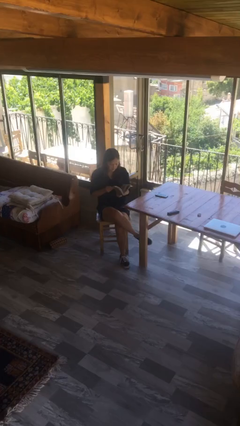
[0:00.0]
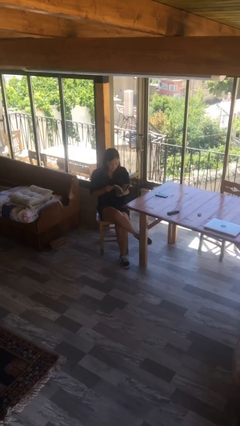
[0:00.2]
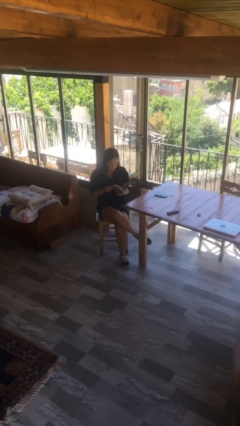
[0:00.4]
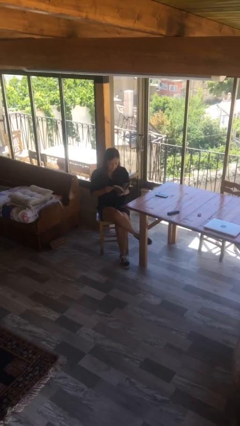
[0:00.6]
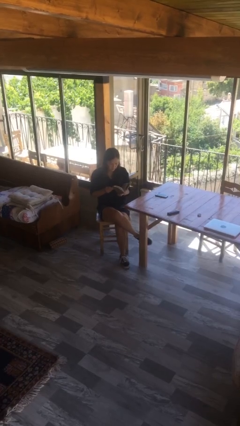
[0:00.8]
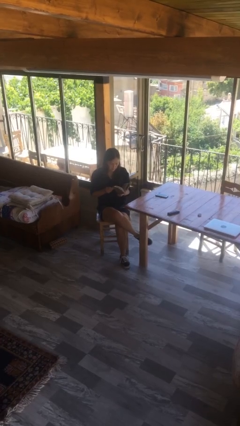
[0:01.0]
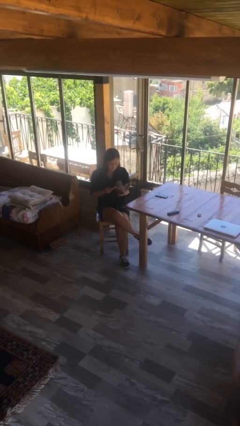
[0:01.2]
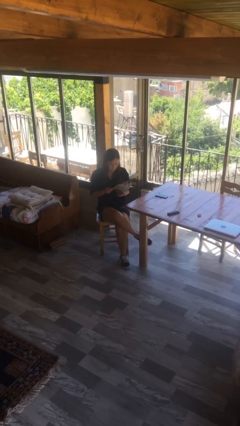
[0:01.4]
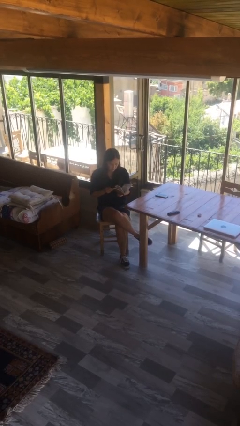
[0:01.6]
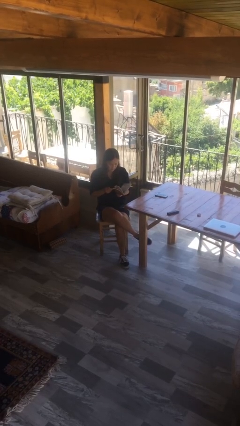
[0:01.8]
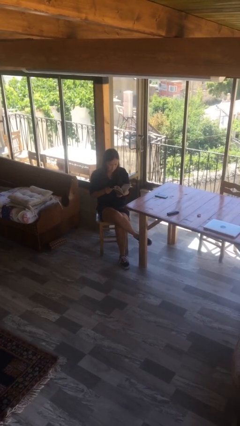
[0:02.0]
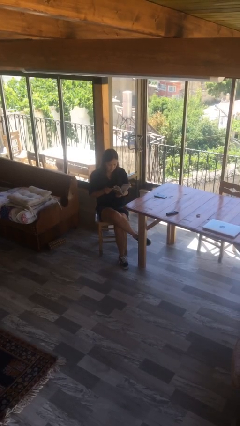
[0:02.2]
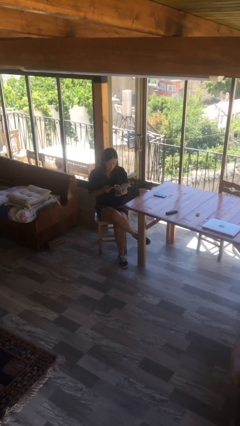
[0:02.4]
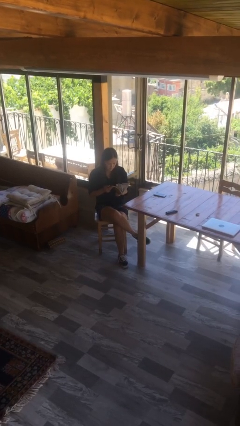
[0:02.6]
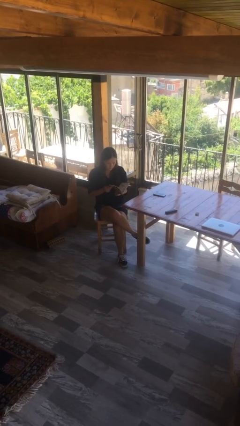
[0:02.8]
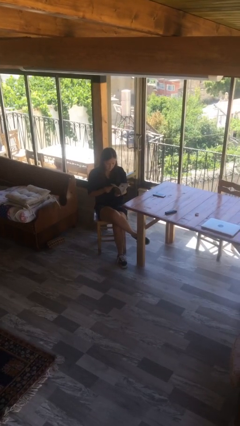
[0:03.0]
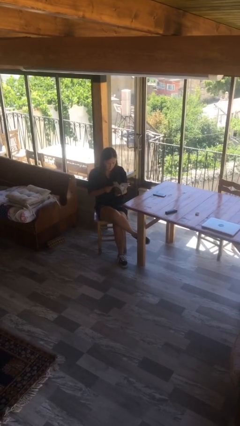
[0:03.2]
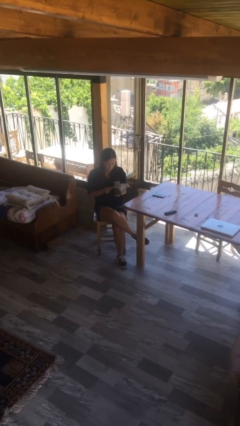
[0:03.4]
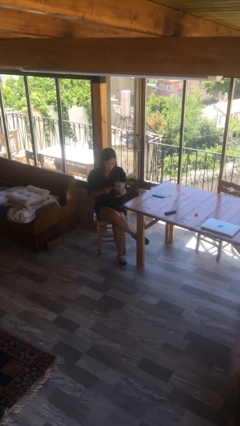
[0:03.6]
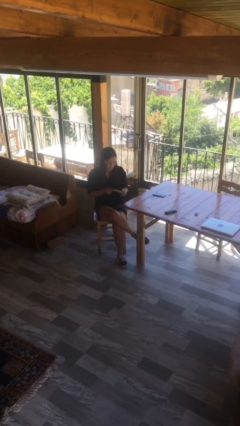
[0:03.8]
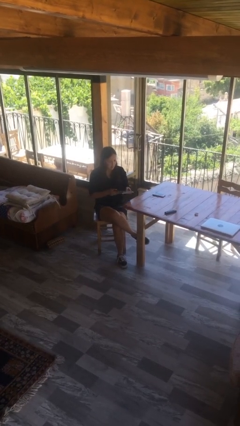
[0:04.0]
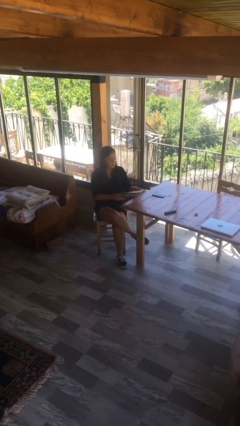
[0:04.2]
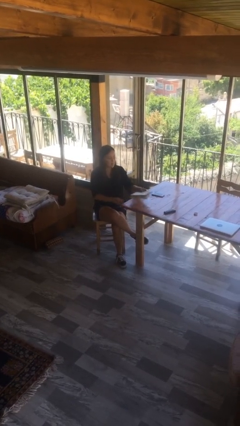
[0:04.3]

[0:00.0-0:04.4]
person reads document

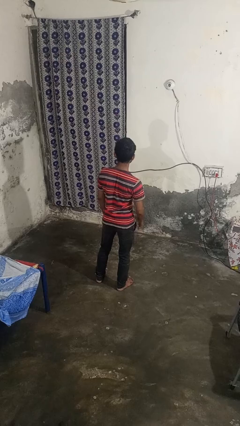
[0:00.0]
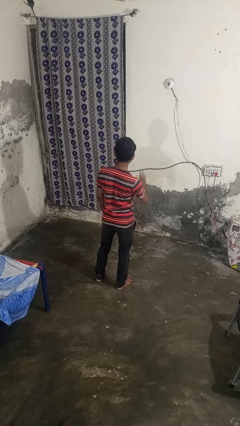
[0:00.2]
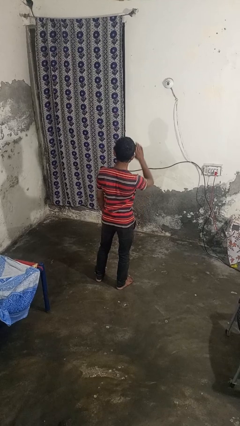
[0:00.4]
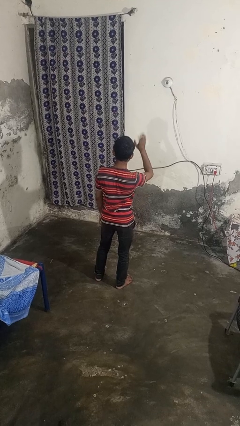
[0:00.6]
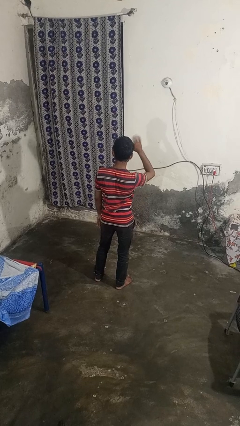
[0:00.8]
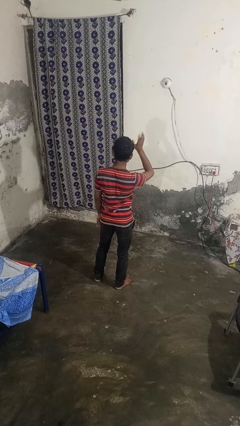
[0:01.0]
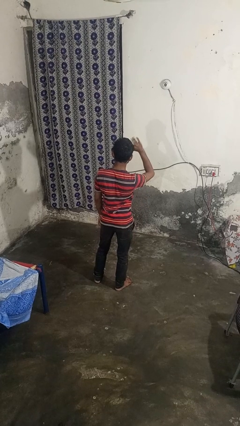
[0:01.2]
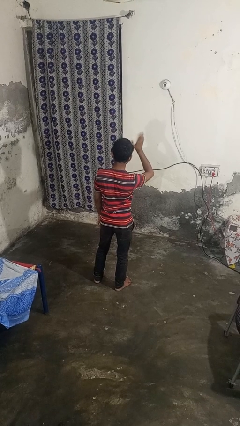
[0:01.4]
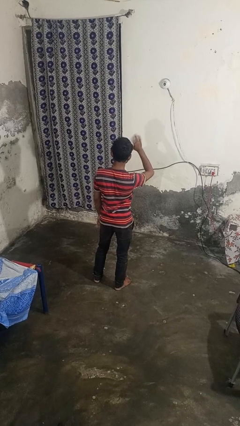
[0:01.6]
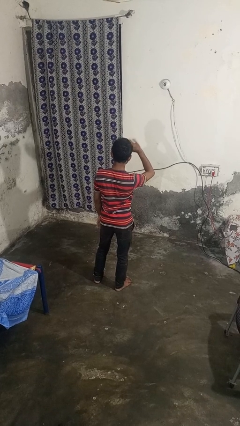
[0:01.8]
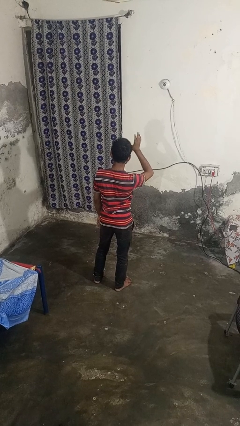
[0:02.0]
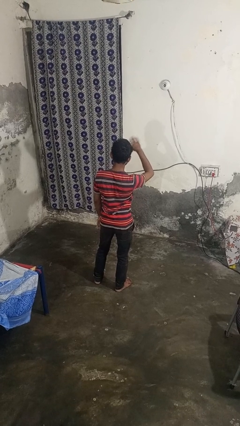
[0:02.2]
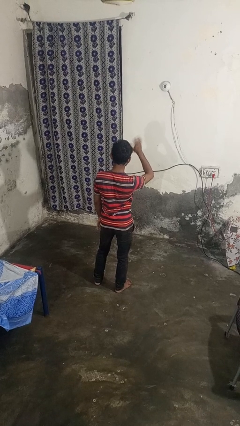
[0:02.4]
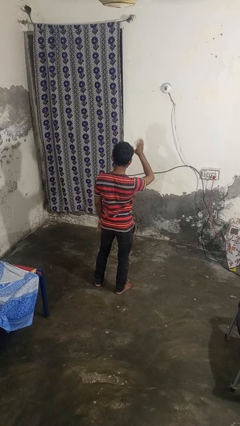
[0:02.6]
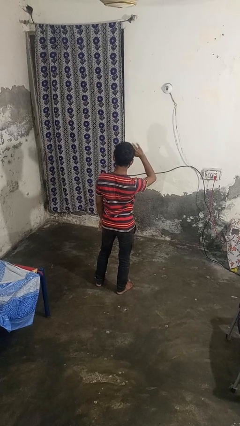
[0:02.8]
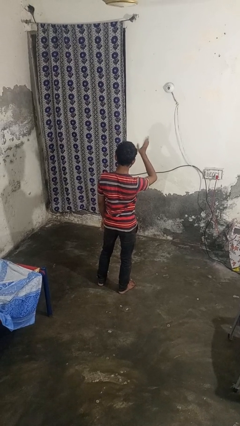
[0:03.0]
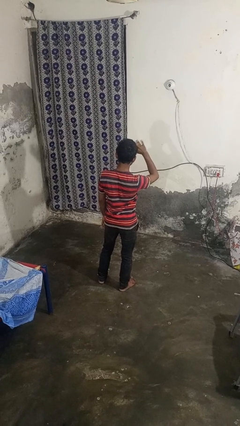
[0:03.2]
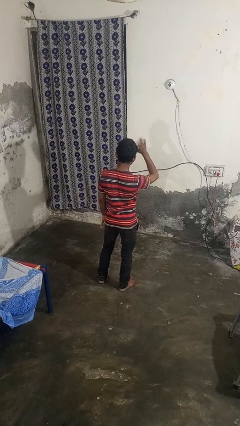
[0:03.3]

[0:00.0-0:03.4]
person waves at person

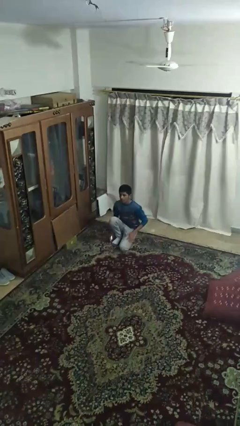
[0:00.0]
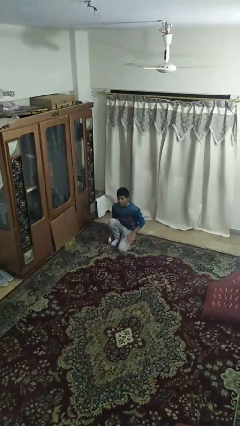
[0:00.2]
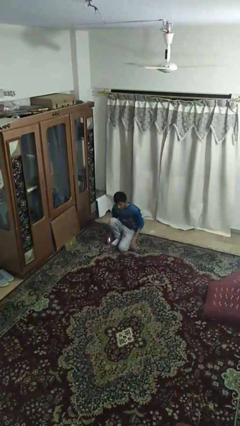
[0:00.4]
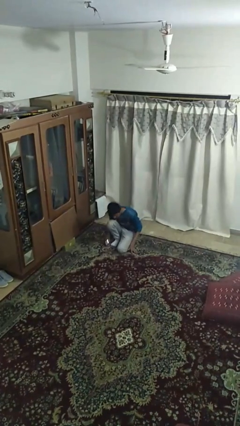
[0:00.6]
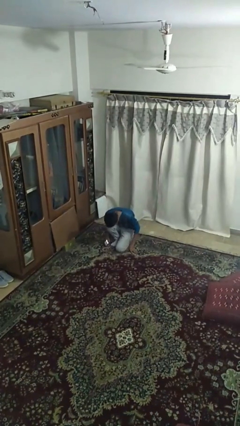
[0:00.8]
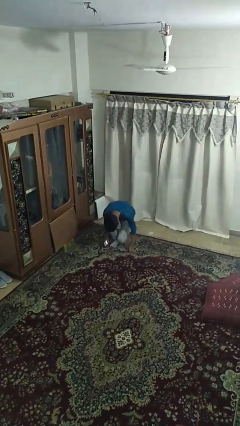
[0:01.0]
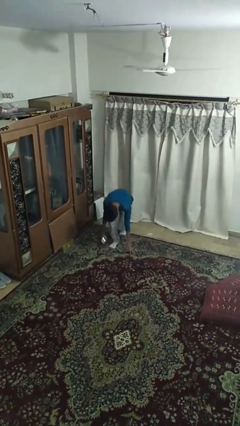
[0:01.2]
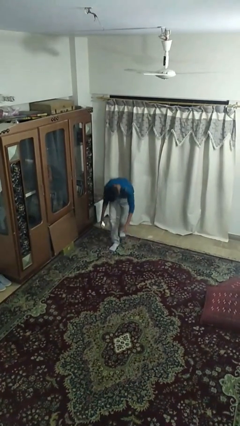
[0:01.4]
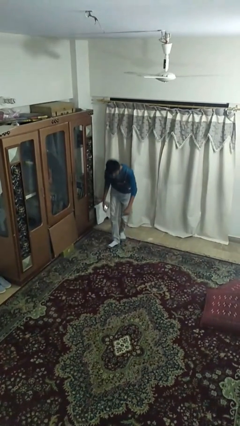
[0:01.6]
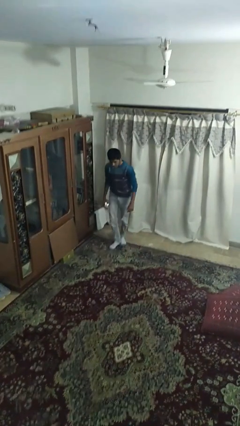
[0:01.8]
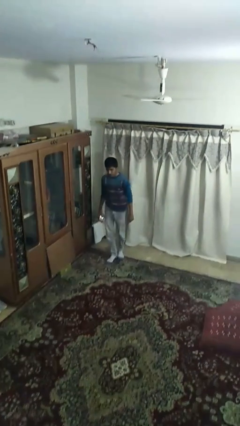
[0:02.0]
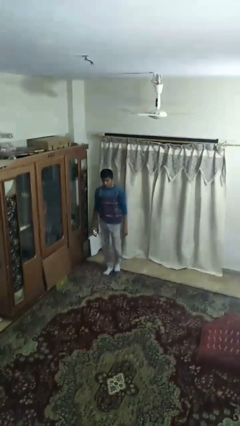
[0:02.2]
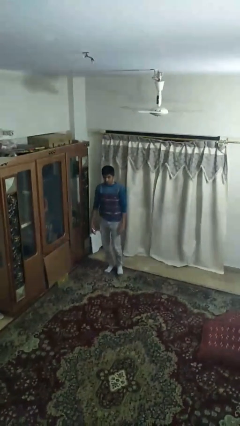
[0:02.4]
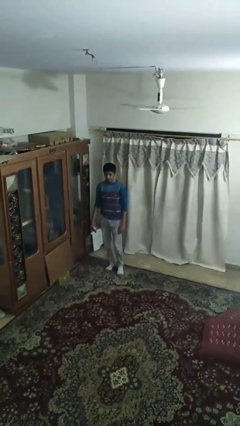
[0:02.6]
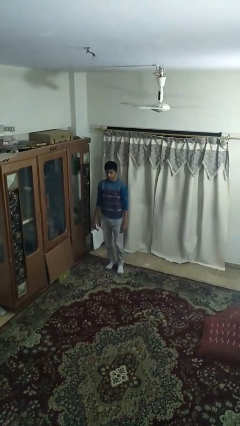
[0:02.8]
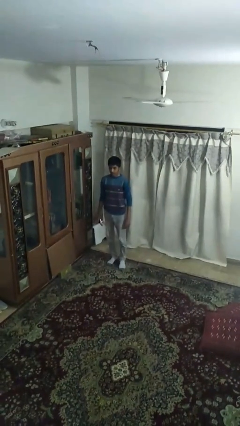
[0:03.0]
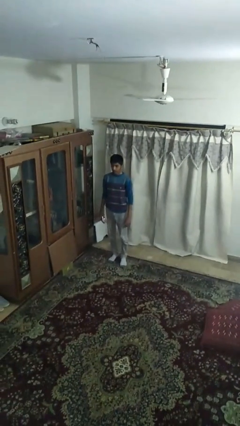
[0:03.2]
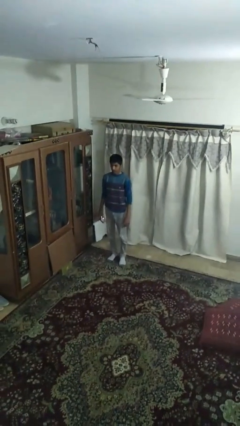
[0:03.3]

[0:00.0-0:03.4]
person stands up

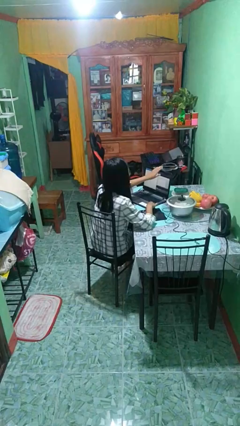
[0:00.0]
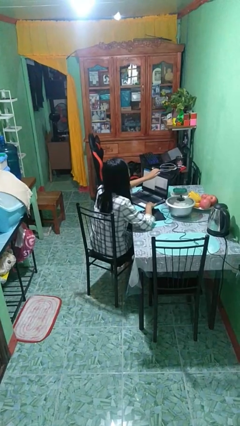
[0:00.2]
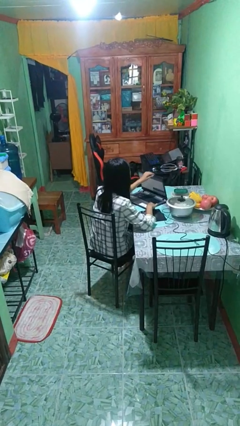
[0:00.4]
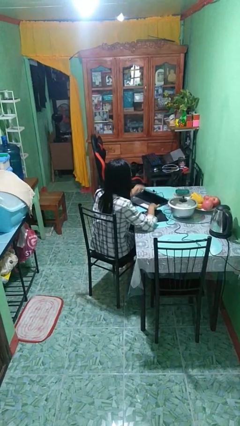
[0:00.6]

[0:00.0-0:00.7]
person closes laptop

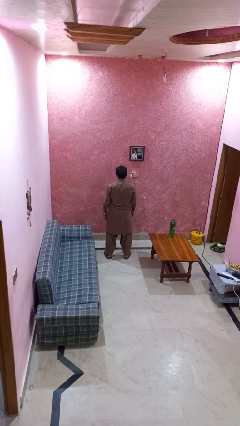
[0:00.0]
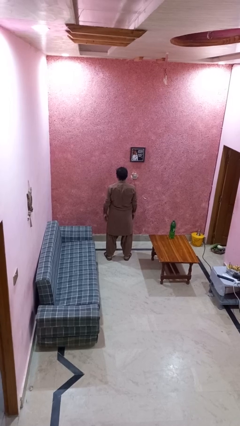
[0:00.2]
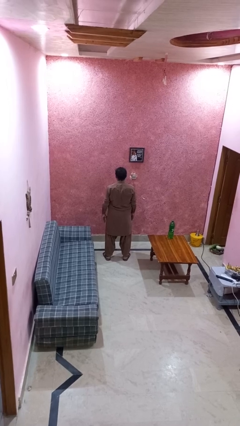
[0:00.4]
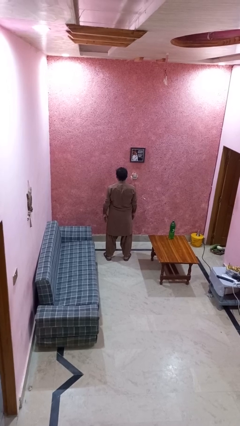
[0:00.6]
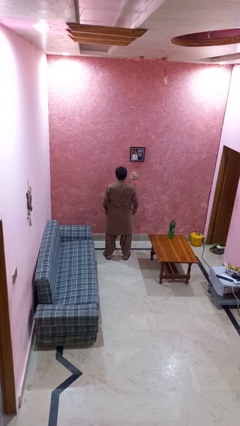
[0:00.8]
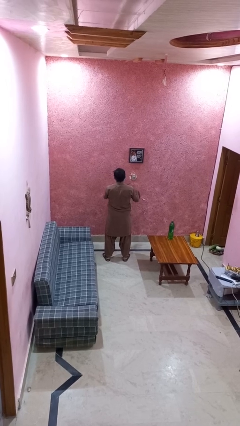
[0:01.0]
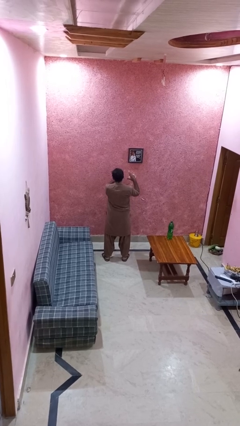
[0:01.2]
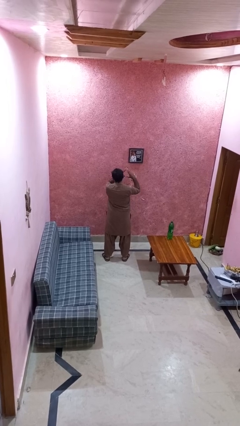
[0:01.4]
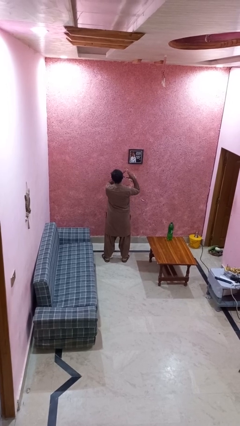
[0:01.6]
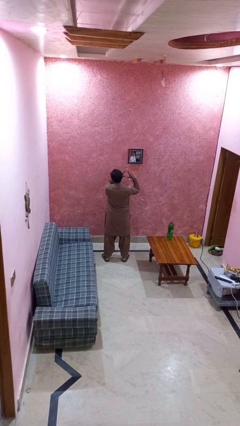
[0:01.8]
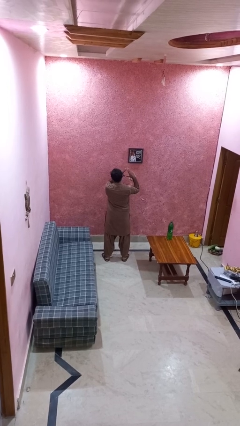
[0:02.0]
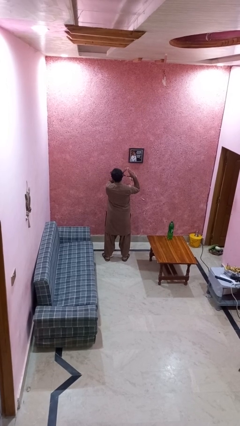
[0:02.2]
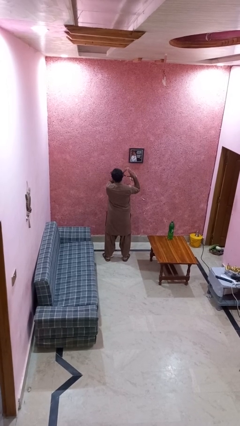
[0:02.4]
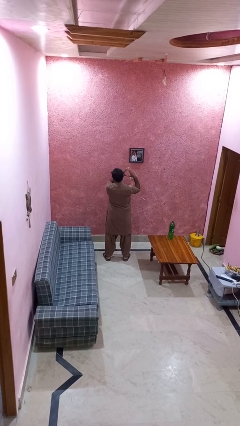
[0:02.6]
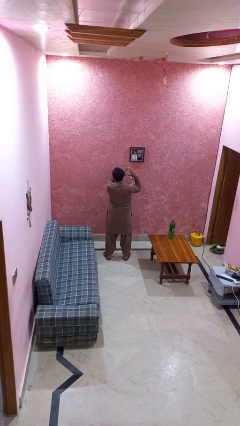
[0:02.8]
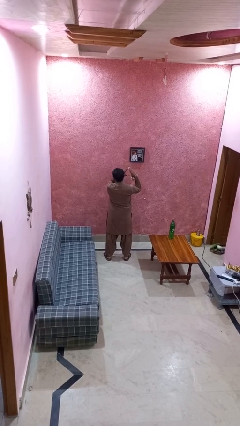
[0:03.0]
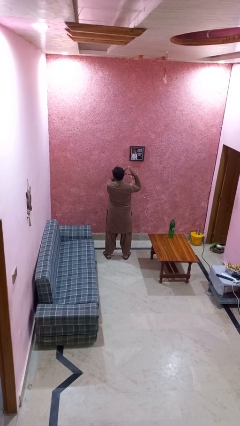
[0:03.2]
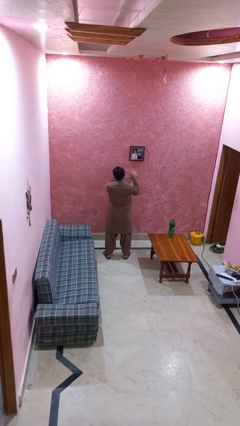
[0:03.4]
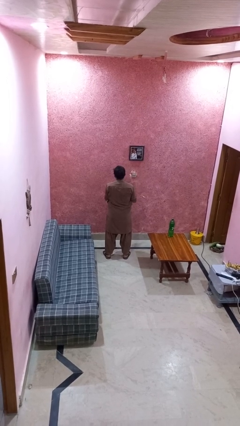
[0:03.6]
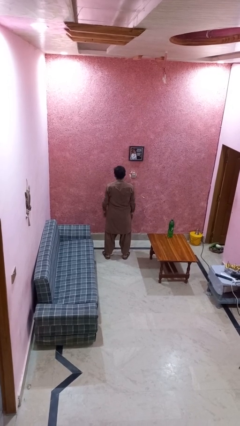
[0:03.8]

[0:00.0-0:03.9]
person gestures heart

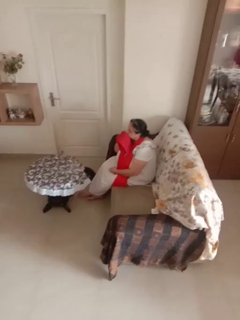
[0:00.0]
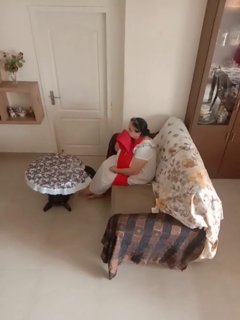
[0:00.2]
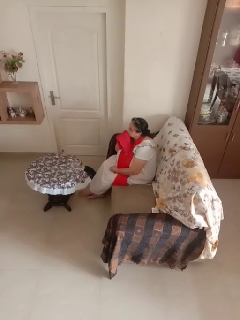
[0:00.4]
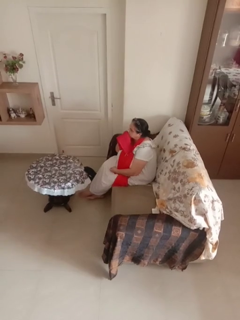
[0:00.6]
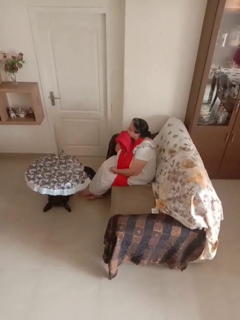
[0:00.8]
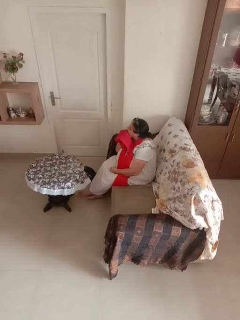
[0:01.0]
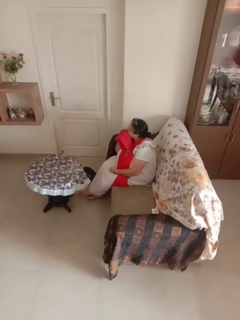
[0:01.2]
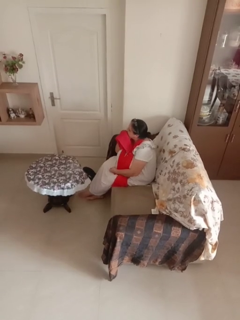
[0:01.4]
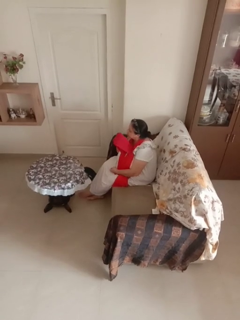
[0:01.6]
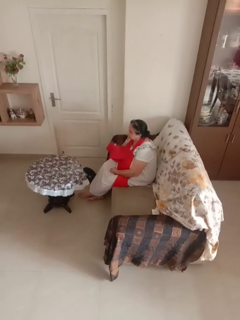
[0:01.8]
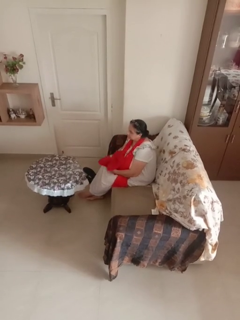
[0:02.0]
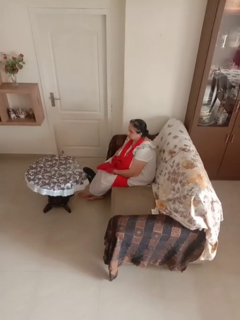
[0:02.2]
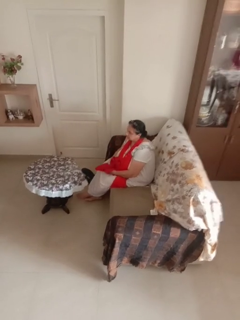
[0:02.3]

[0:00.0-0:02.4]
person wipes mouth with napkin
